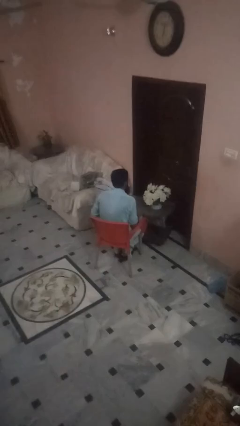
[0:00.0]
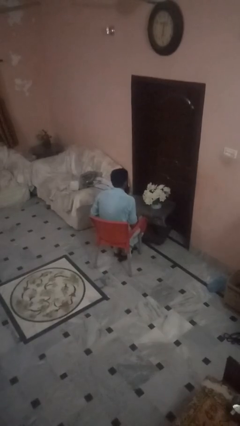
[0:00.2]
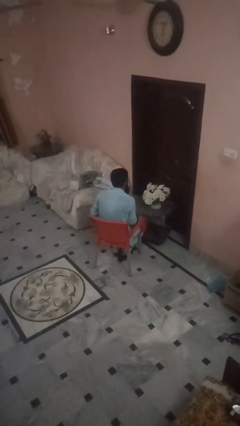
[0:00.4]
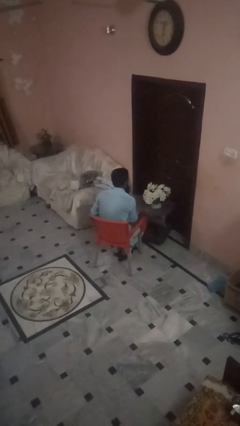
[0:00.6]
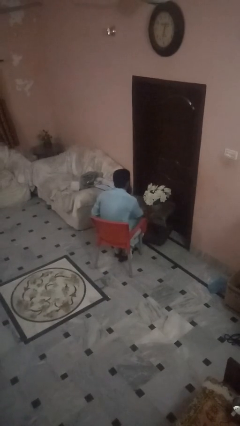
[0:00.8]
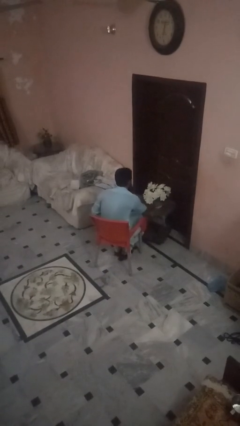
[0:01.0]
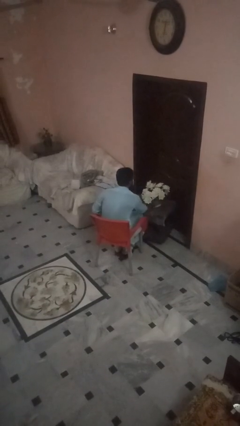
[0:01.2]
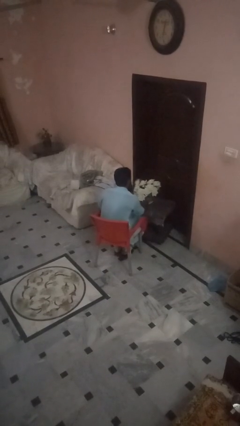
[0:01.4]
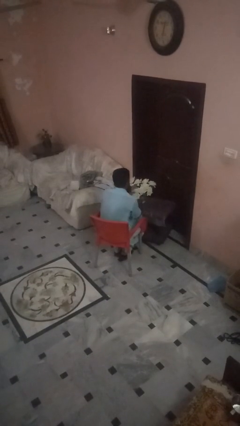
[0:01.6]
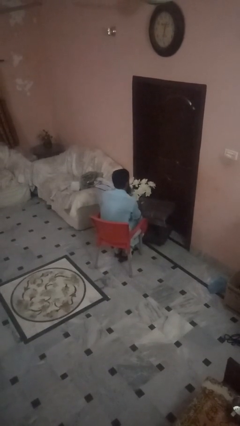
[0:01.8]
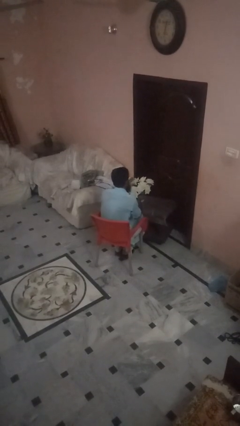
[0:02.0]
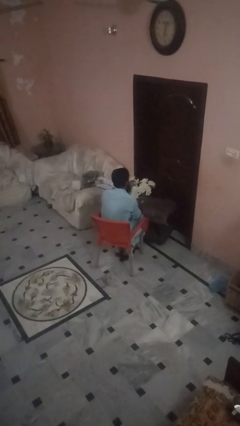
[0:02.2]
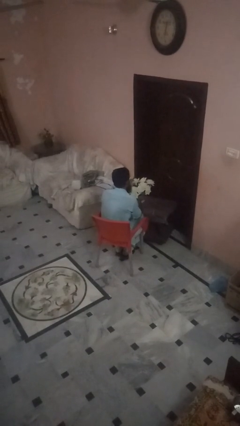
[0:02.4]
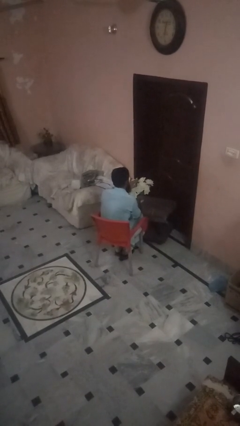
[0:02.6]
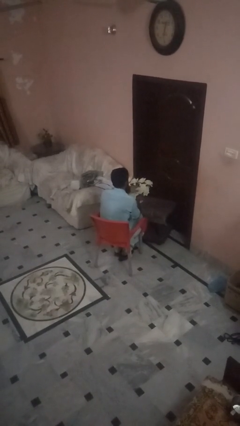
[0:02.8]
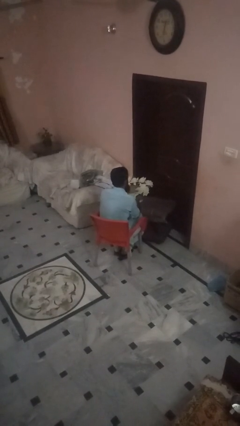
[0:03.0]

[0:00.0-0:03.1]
person arranges flowers in vase

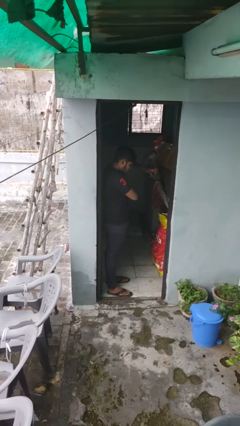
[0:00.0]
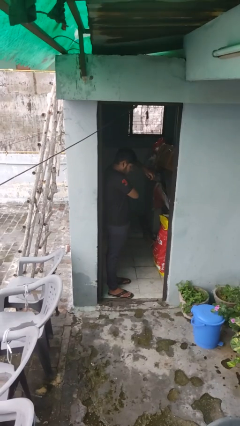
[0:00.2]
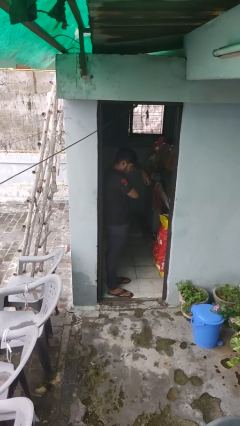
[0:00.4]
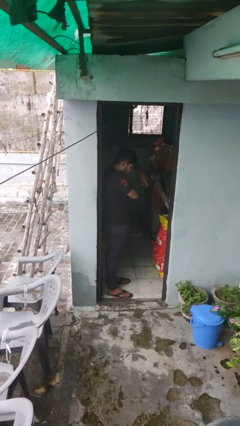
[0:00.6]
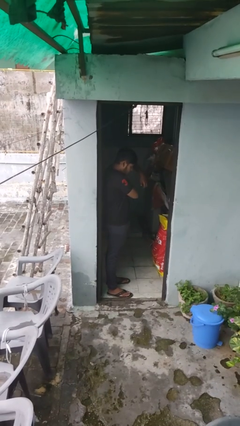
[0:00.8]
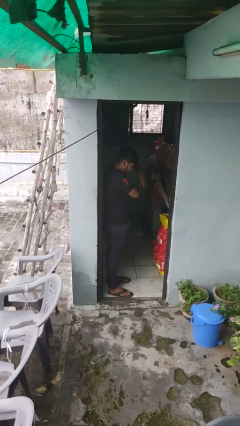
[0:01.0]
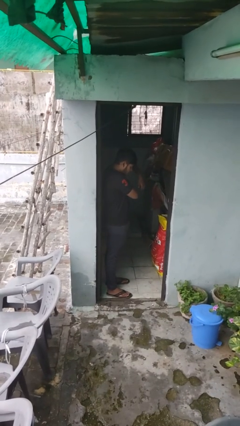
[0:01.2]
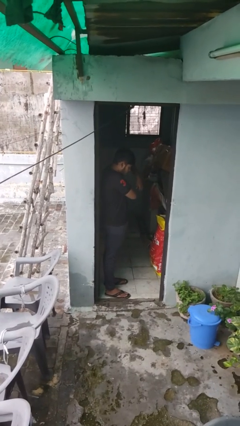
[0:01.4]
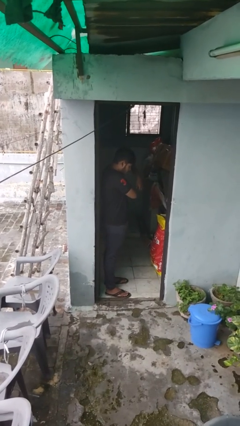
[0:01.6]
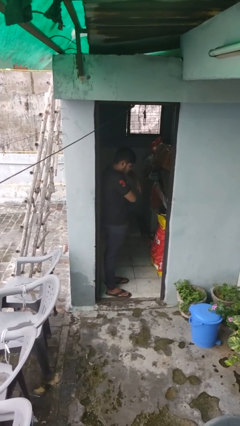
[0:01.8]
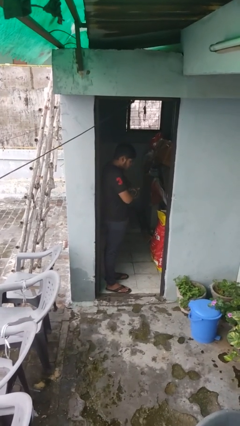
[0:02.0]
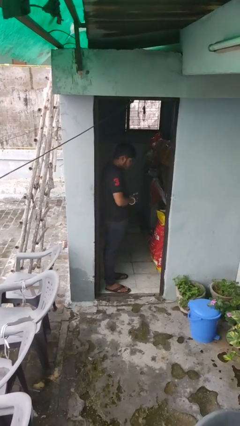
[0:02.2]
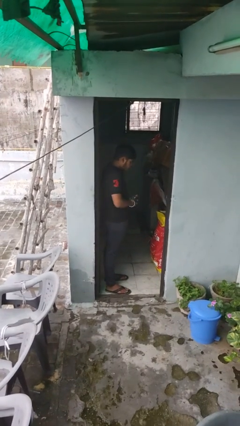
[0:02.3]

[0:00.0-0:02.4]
person applies deodorant

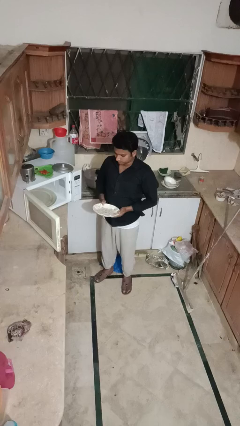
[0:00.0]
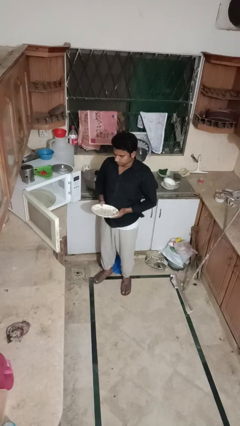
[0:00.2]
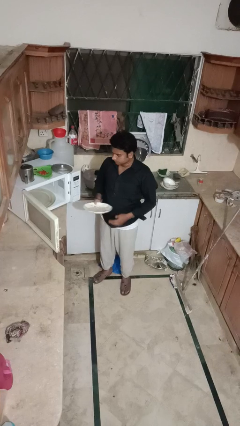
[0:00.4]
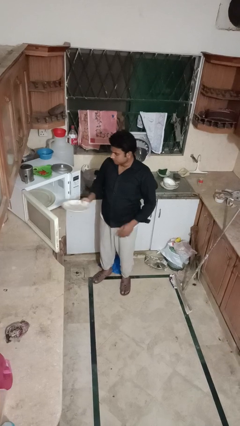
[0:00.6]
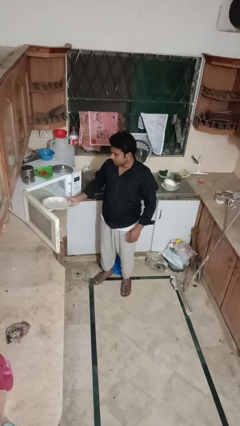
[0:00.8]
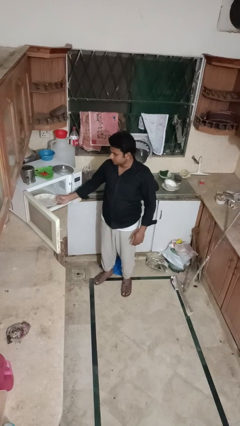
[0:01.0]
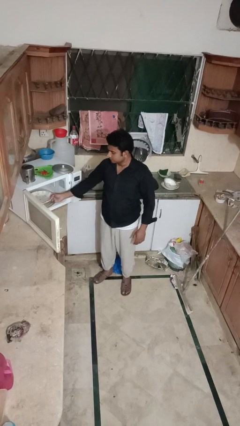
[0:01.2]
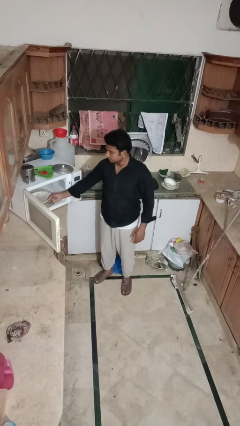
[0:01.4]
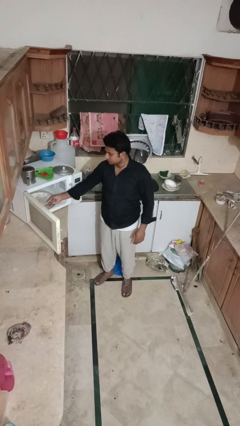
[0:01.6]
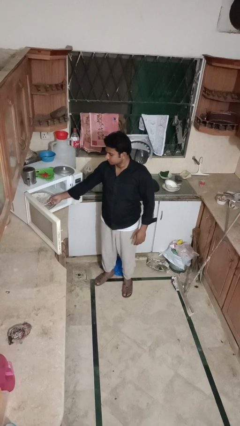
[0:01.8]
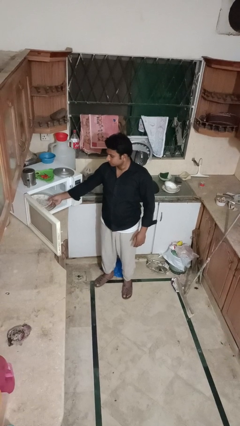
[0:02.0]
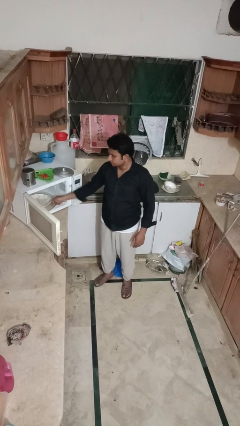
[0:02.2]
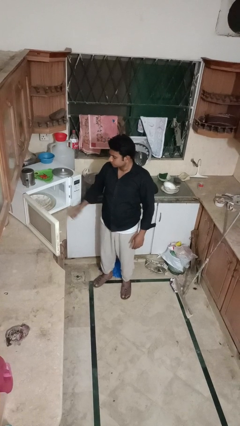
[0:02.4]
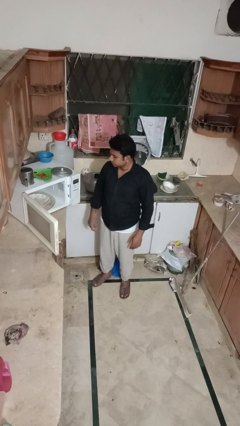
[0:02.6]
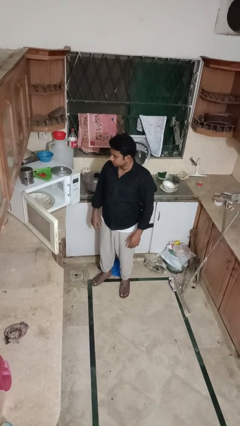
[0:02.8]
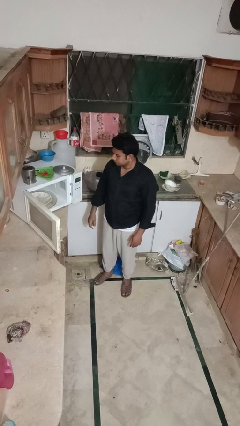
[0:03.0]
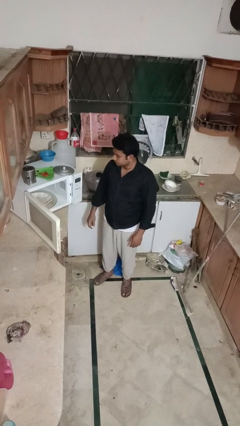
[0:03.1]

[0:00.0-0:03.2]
person puts object into microwave

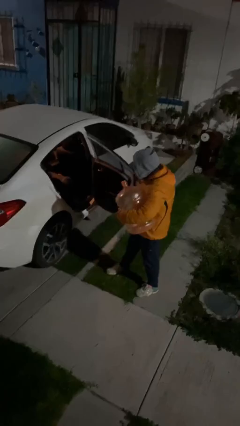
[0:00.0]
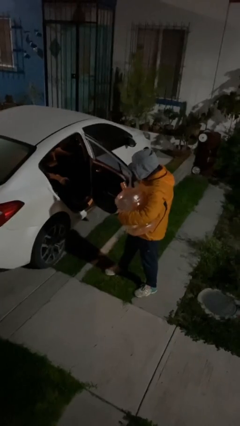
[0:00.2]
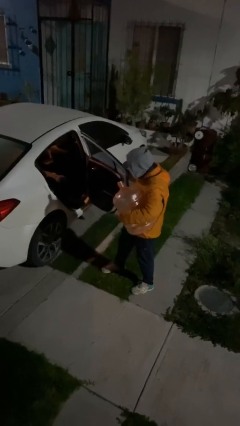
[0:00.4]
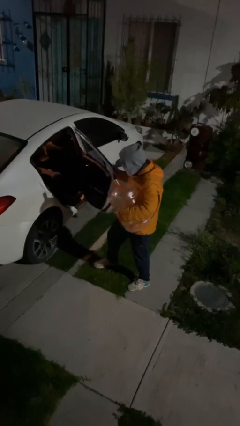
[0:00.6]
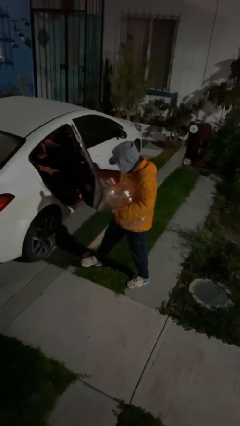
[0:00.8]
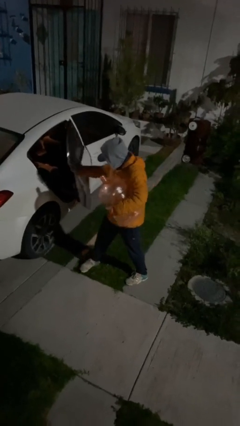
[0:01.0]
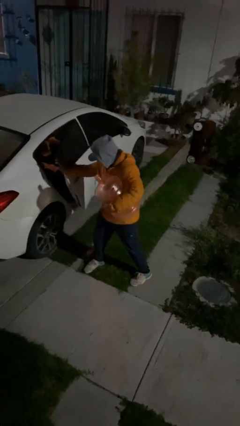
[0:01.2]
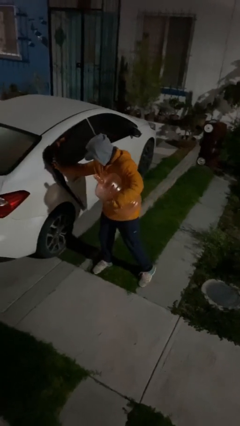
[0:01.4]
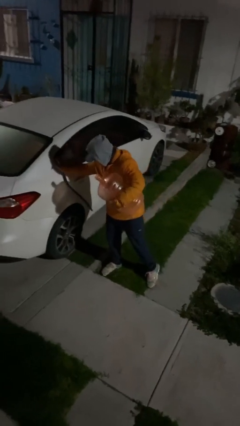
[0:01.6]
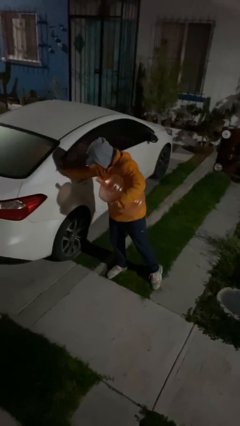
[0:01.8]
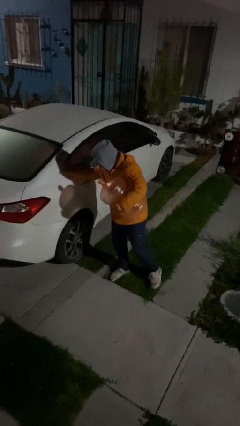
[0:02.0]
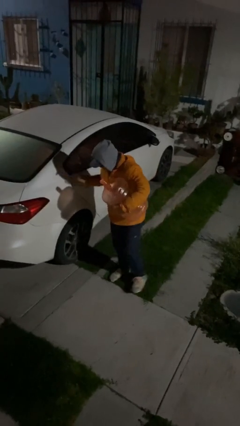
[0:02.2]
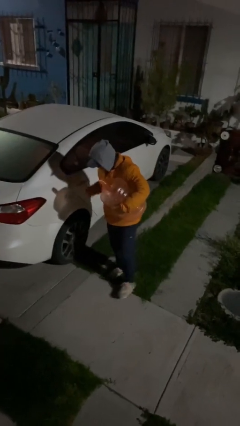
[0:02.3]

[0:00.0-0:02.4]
person closes car door

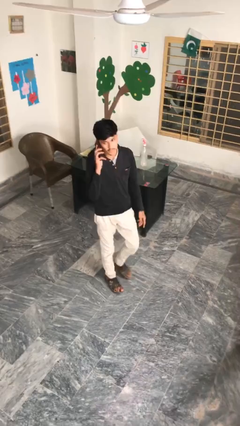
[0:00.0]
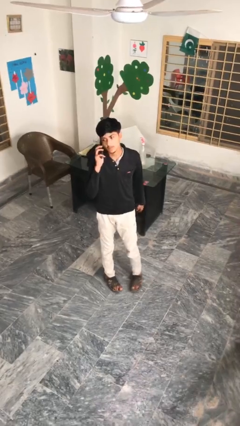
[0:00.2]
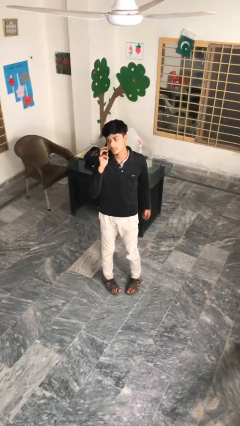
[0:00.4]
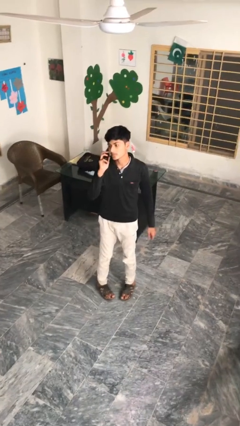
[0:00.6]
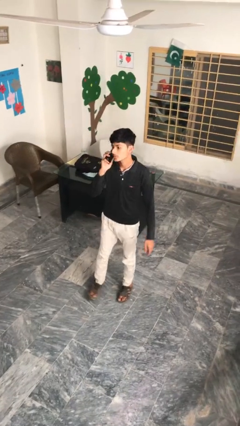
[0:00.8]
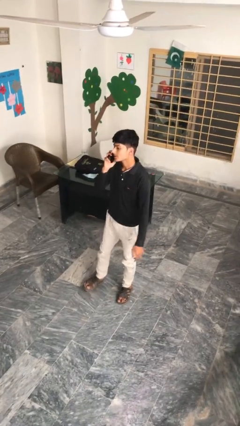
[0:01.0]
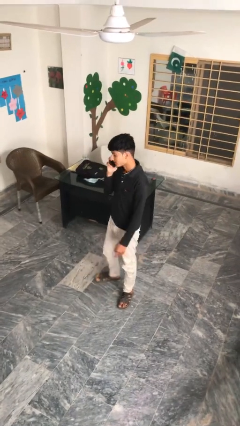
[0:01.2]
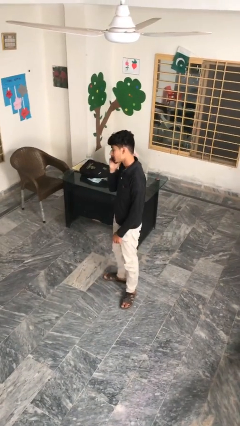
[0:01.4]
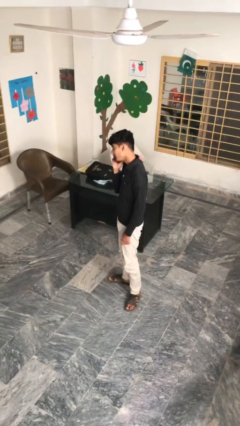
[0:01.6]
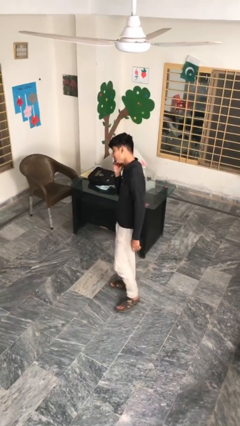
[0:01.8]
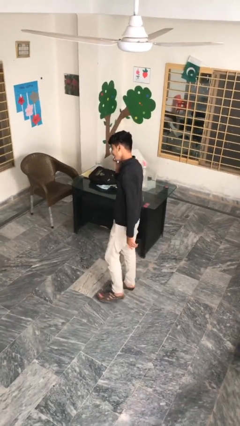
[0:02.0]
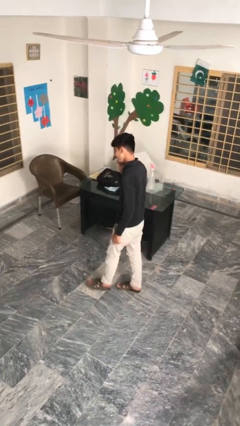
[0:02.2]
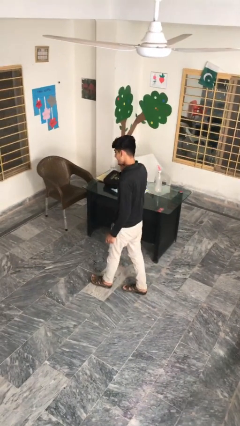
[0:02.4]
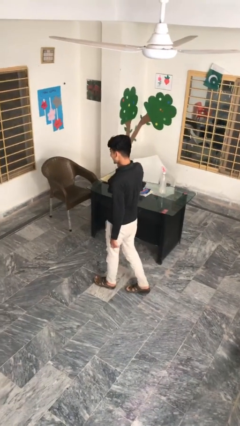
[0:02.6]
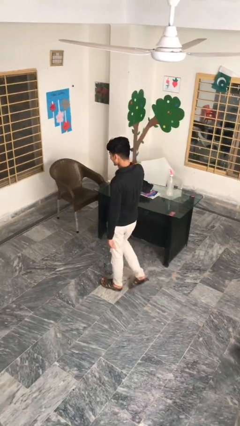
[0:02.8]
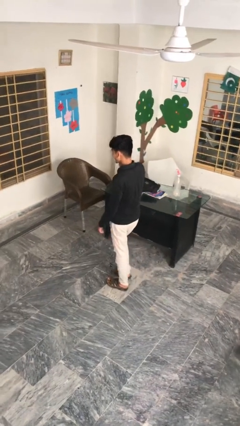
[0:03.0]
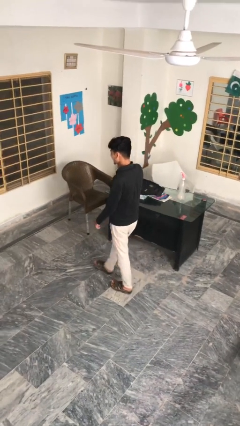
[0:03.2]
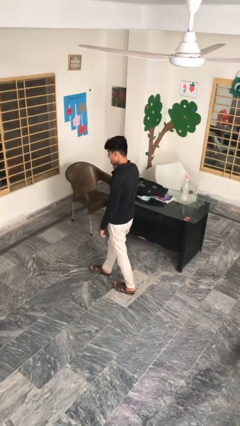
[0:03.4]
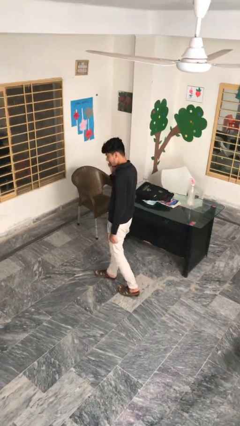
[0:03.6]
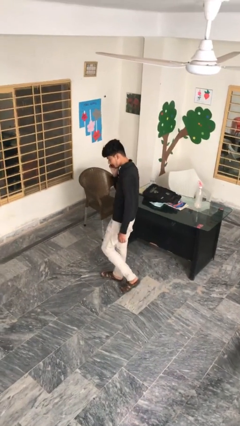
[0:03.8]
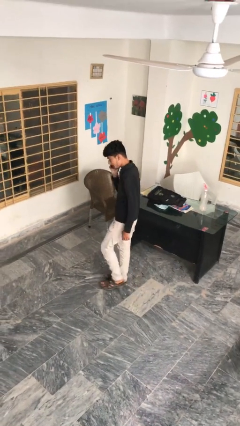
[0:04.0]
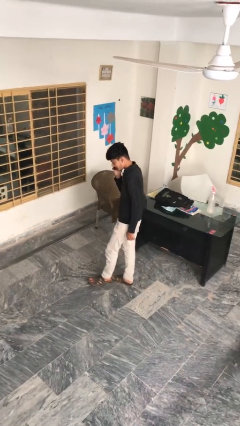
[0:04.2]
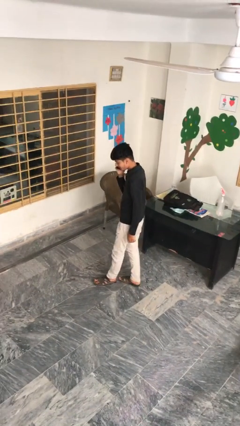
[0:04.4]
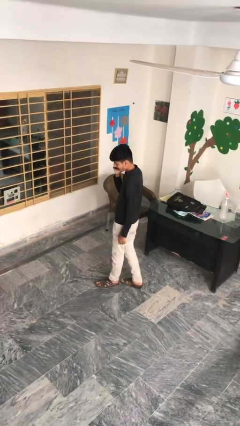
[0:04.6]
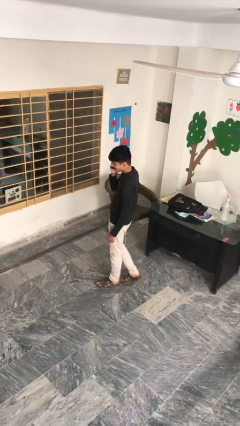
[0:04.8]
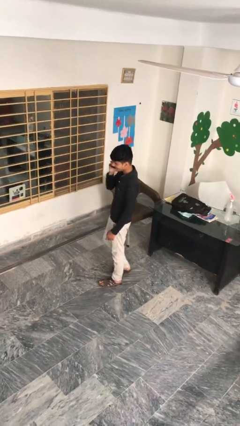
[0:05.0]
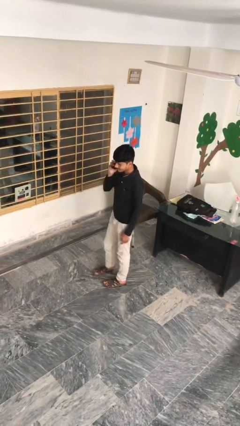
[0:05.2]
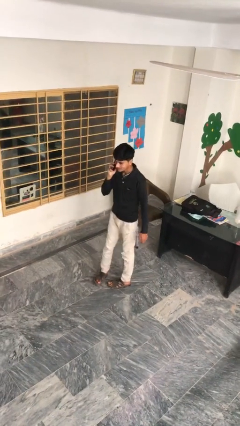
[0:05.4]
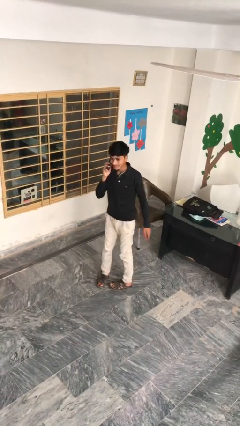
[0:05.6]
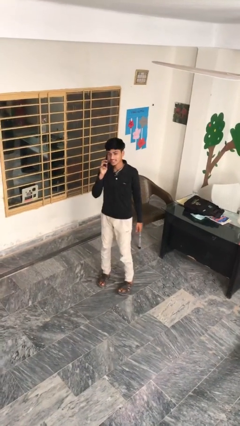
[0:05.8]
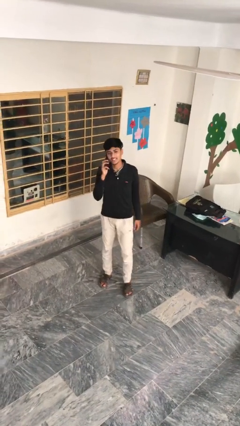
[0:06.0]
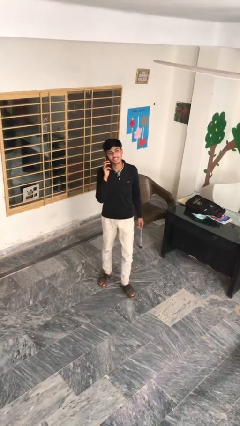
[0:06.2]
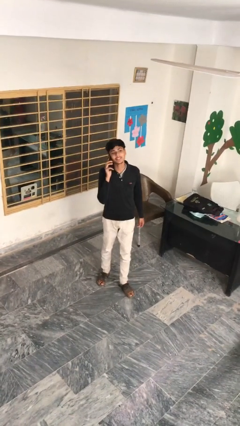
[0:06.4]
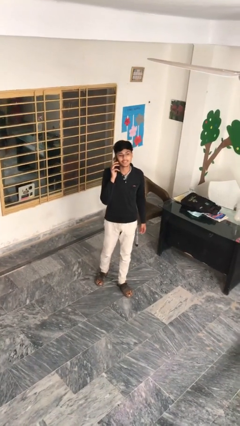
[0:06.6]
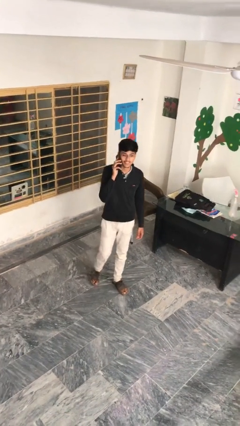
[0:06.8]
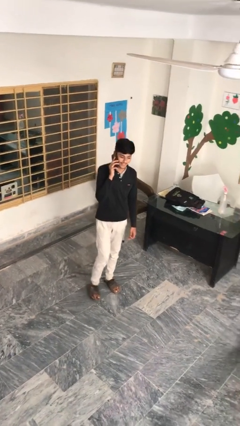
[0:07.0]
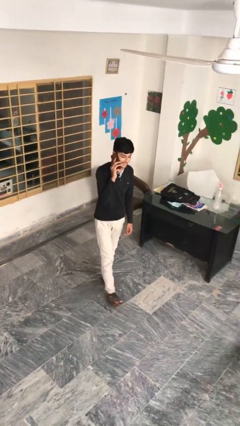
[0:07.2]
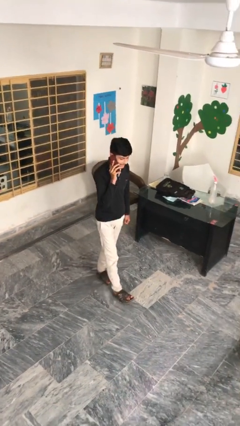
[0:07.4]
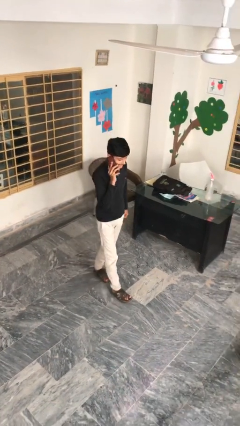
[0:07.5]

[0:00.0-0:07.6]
person talks on phone
